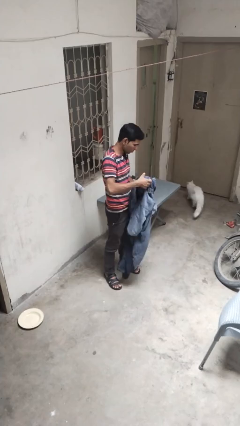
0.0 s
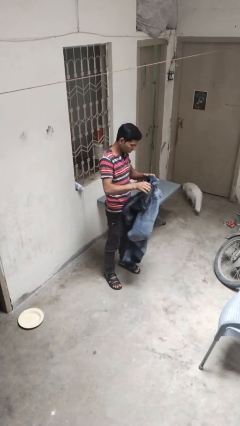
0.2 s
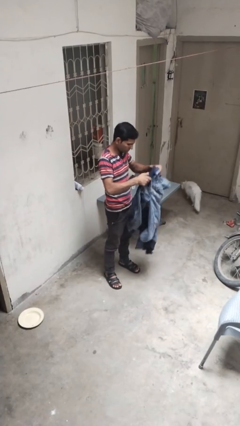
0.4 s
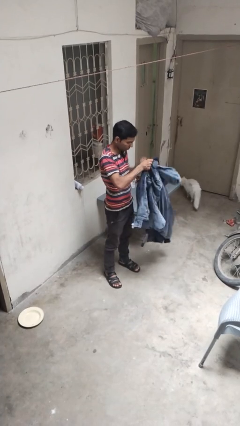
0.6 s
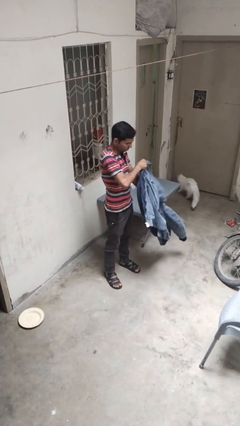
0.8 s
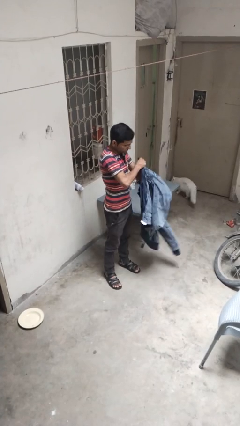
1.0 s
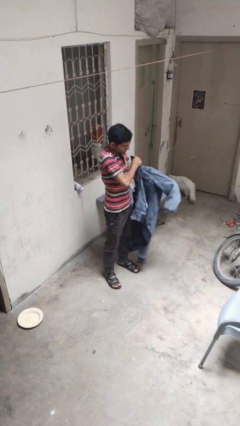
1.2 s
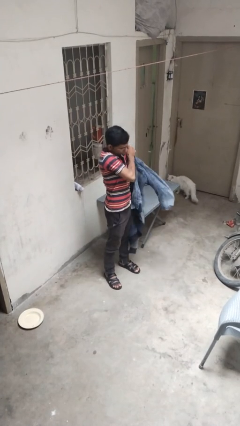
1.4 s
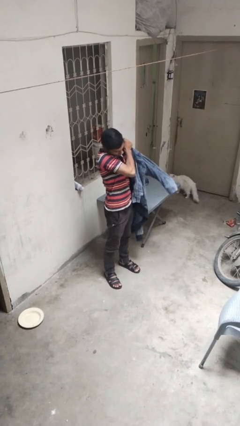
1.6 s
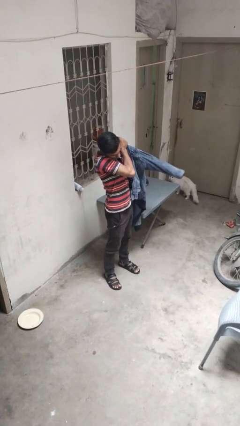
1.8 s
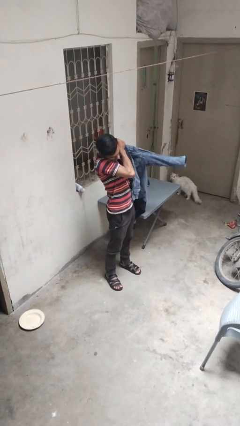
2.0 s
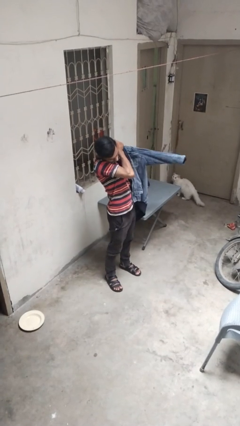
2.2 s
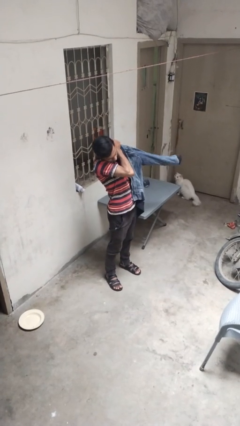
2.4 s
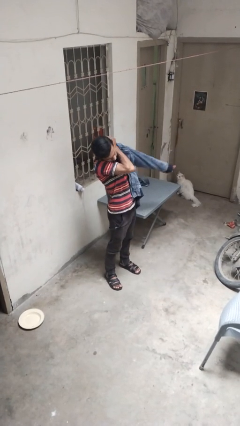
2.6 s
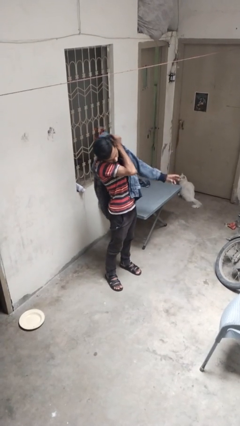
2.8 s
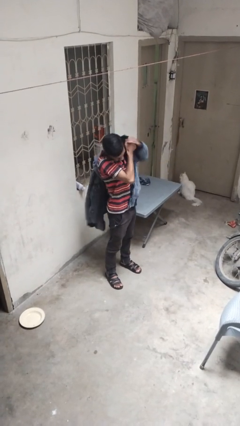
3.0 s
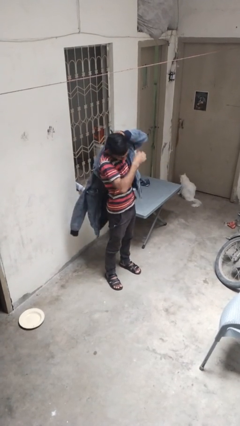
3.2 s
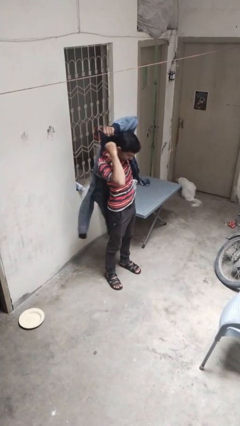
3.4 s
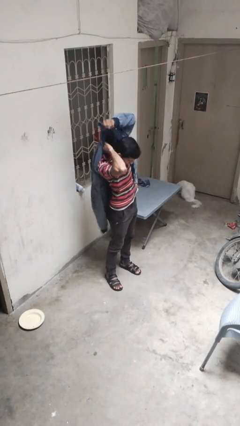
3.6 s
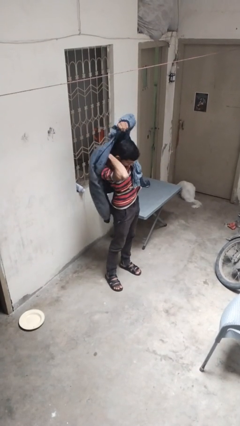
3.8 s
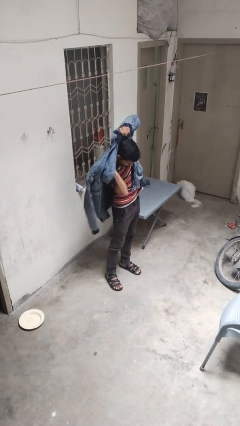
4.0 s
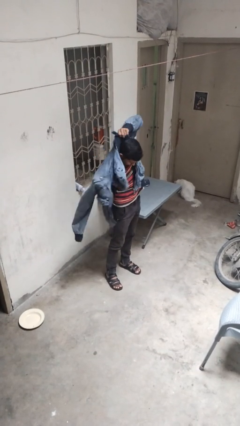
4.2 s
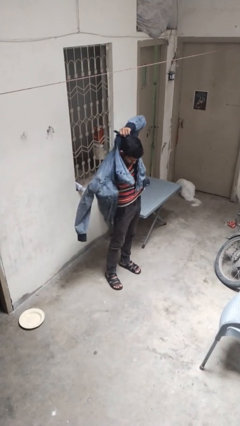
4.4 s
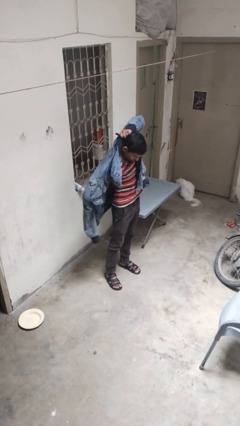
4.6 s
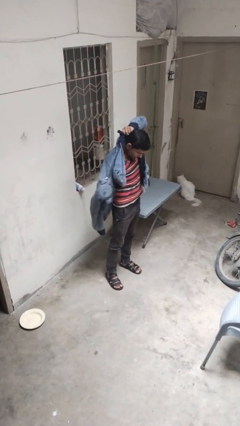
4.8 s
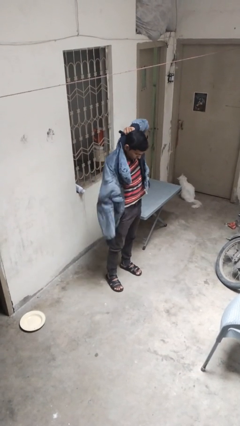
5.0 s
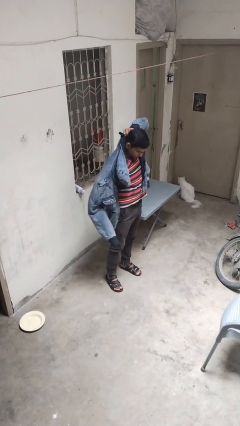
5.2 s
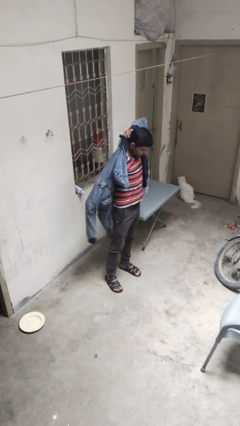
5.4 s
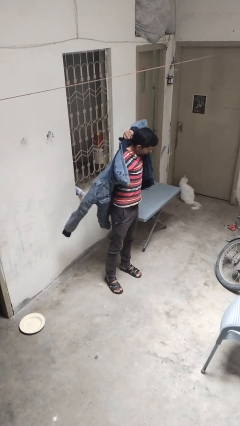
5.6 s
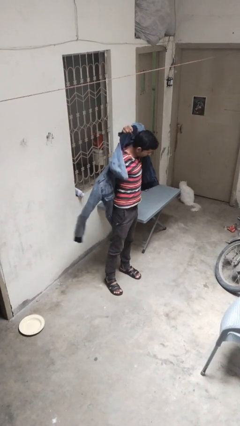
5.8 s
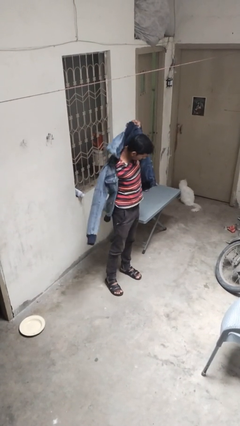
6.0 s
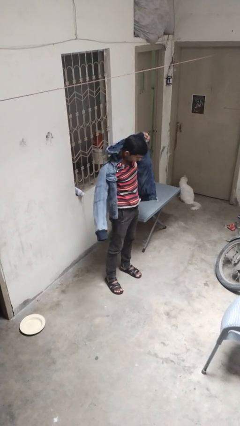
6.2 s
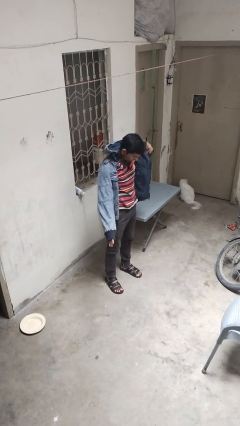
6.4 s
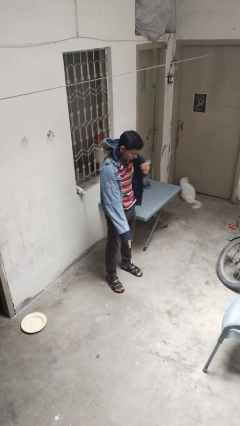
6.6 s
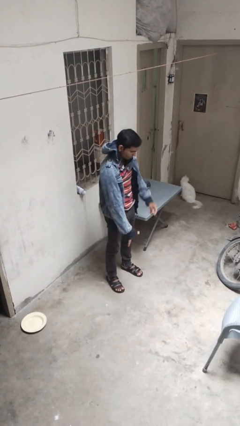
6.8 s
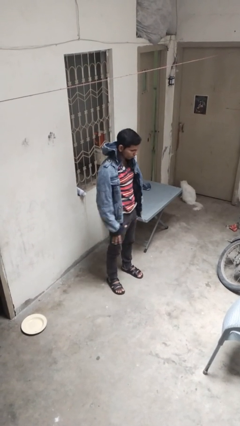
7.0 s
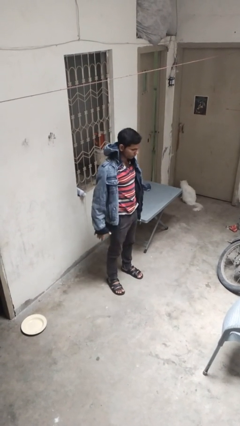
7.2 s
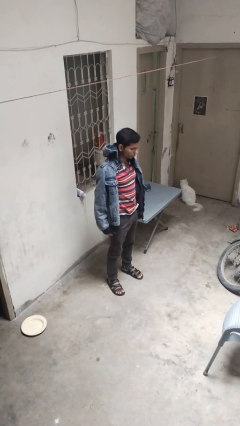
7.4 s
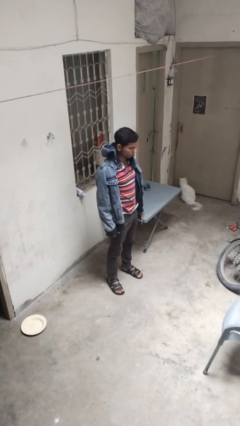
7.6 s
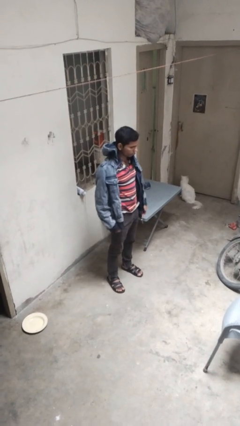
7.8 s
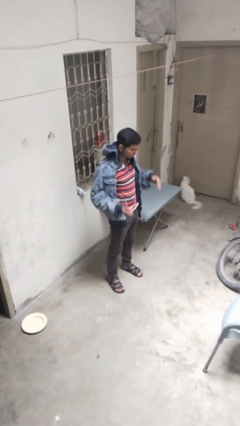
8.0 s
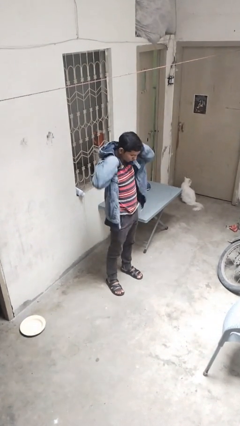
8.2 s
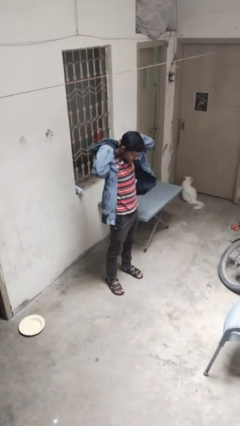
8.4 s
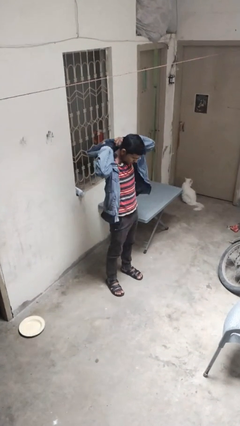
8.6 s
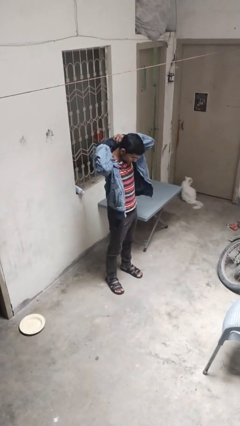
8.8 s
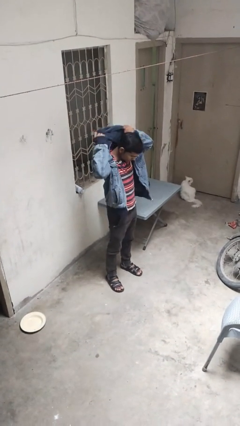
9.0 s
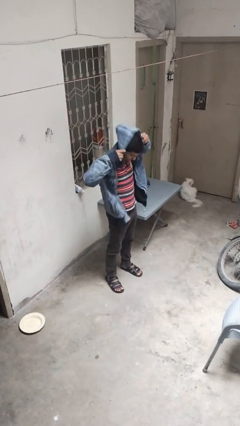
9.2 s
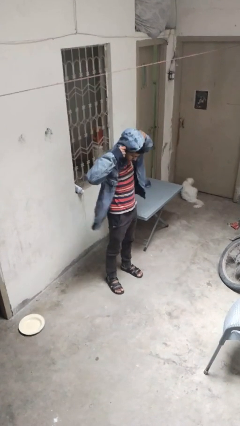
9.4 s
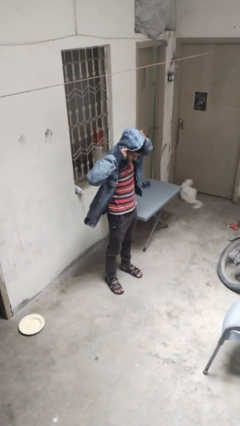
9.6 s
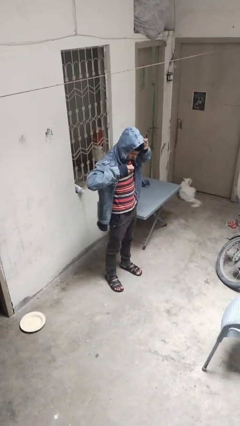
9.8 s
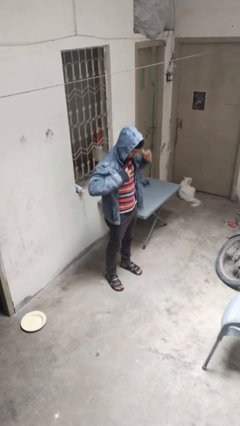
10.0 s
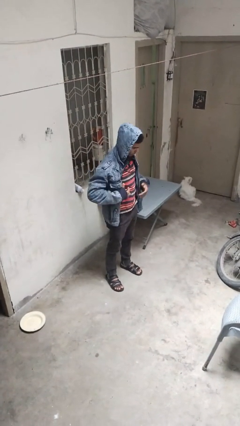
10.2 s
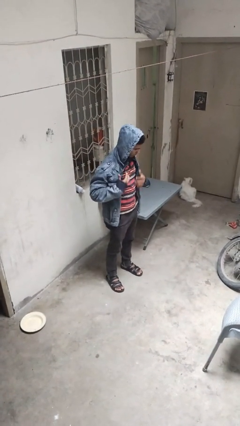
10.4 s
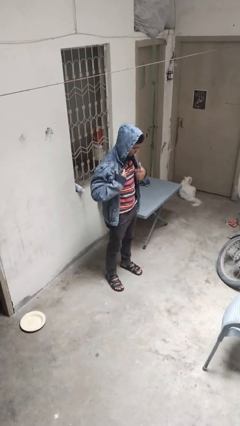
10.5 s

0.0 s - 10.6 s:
person puts on hoodie

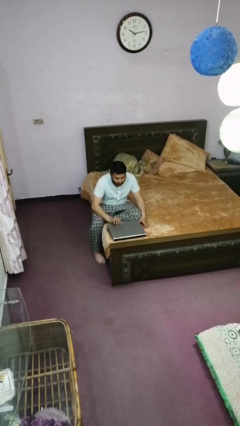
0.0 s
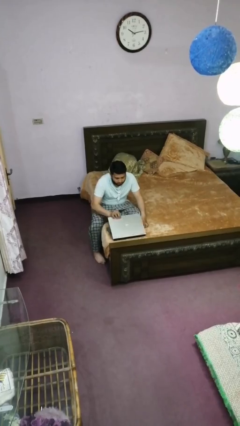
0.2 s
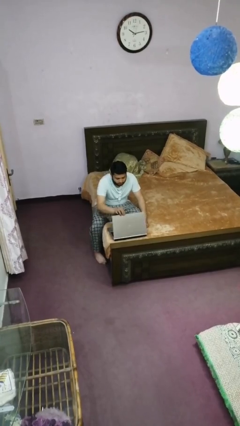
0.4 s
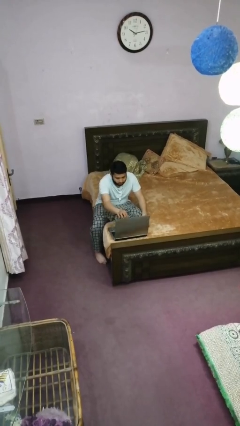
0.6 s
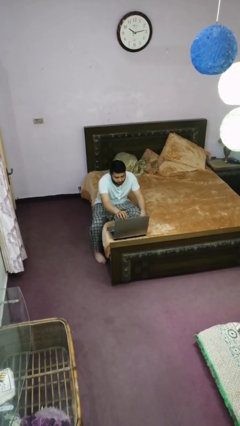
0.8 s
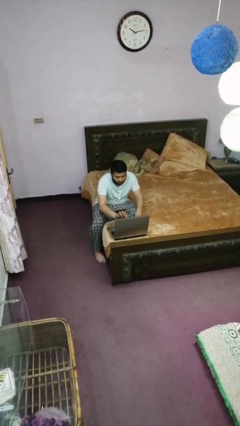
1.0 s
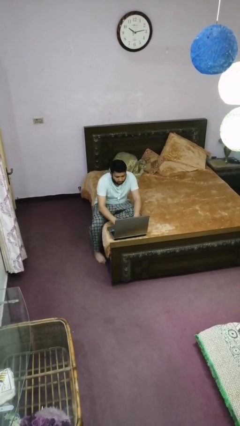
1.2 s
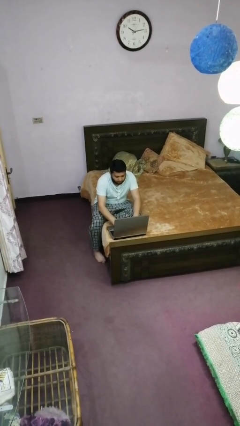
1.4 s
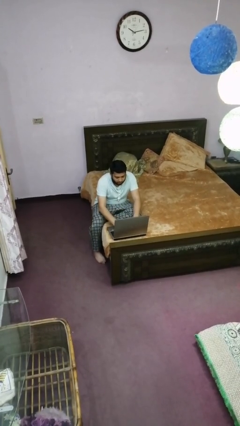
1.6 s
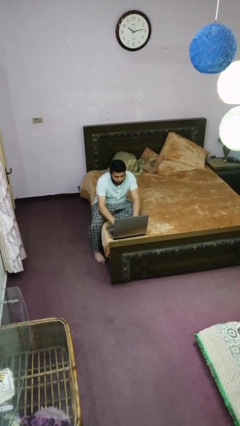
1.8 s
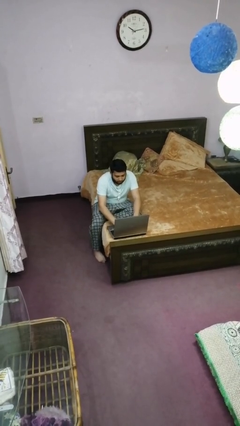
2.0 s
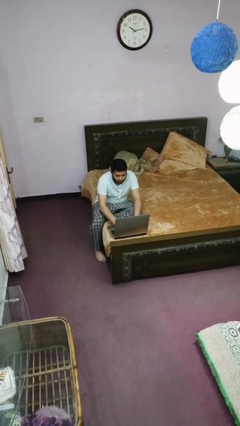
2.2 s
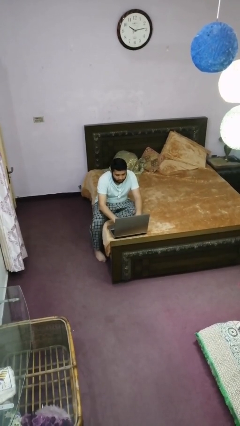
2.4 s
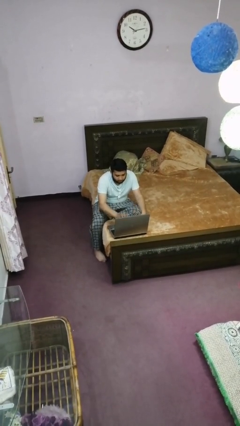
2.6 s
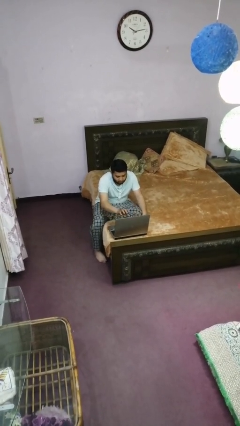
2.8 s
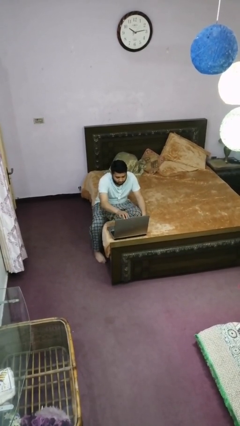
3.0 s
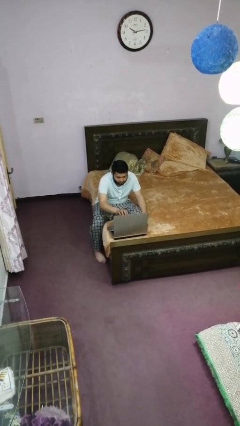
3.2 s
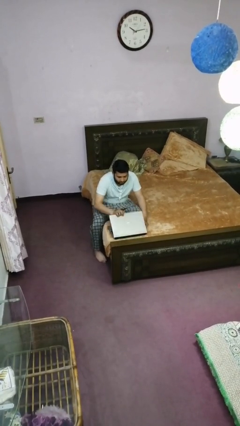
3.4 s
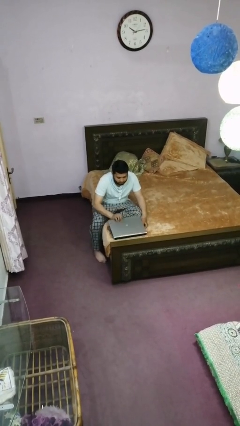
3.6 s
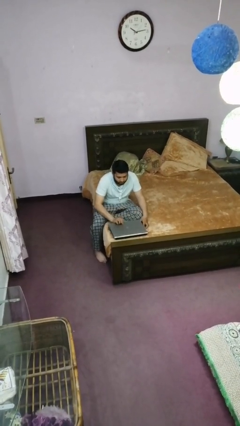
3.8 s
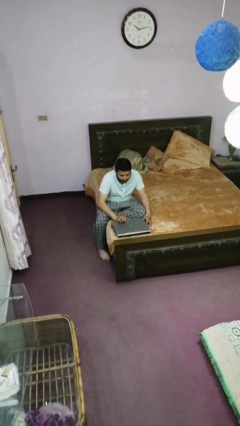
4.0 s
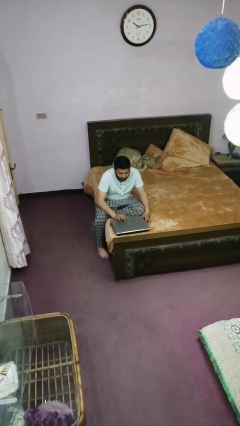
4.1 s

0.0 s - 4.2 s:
person interacts with laptop

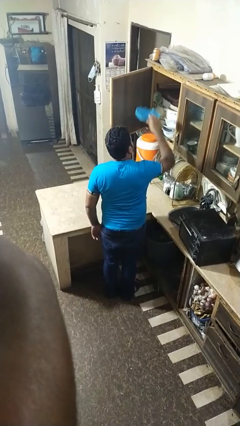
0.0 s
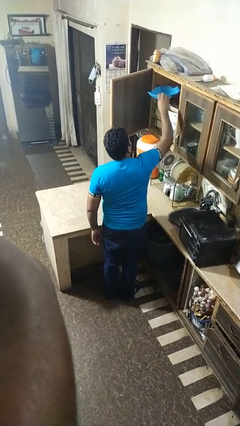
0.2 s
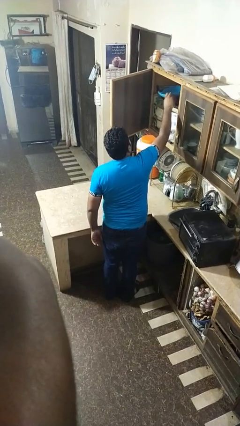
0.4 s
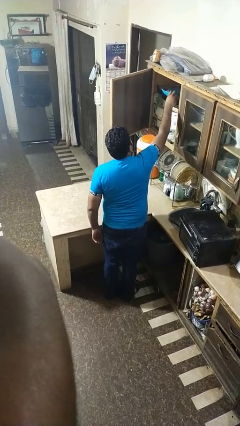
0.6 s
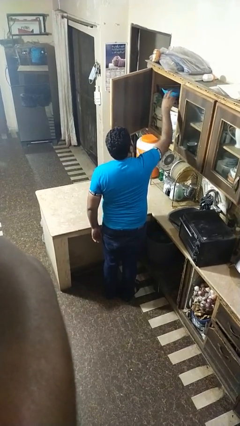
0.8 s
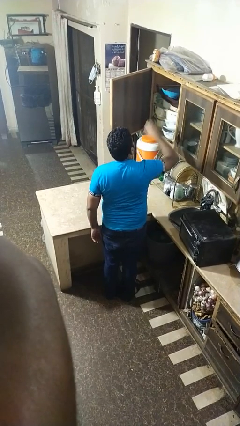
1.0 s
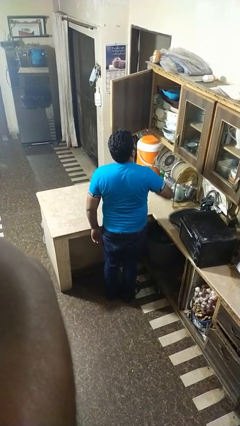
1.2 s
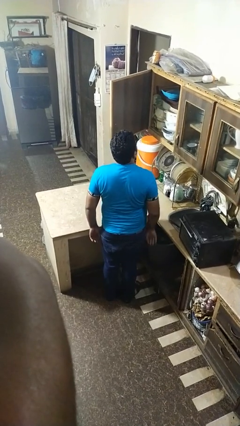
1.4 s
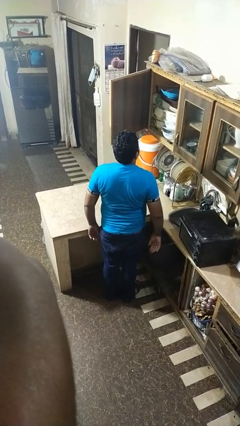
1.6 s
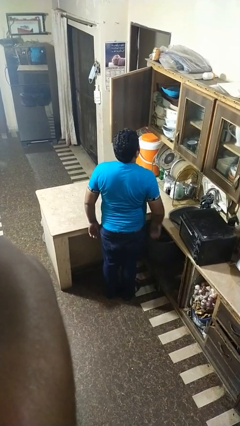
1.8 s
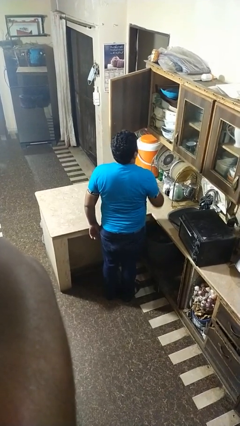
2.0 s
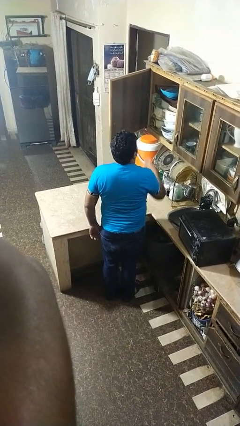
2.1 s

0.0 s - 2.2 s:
person takes object from cabinet

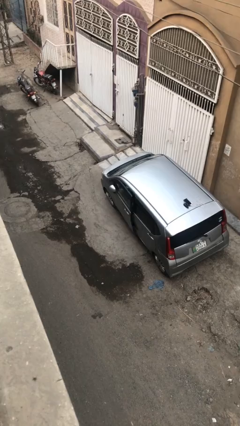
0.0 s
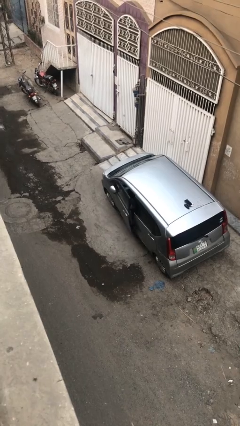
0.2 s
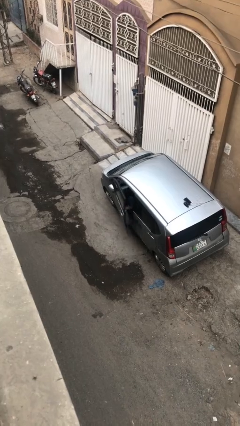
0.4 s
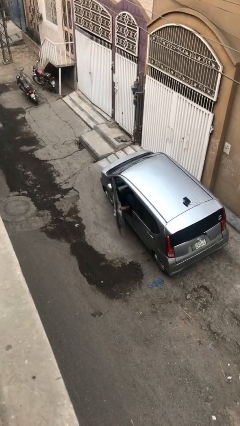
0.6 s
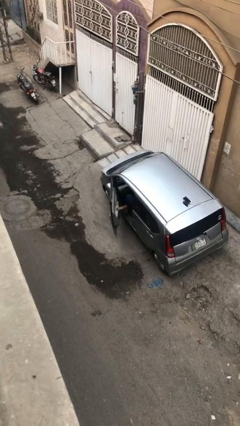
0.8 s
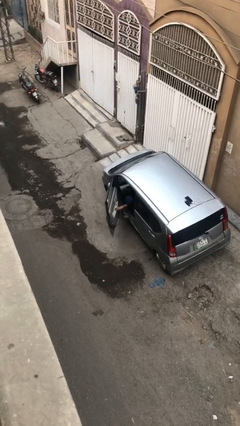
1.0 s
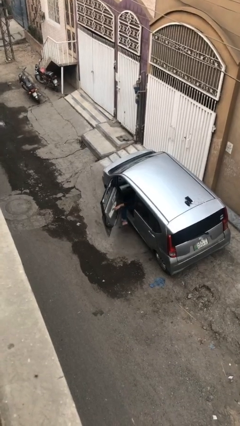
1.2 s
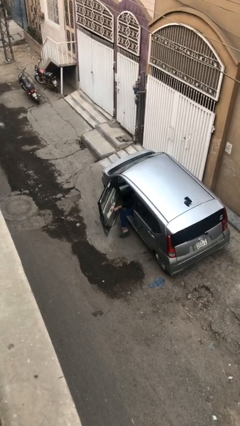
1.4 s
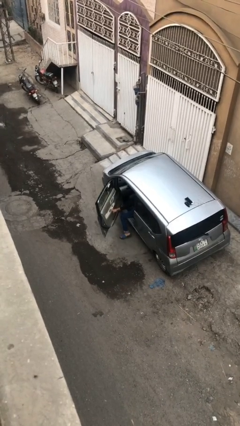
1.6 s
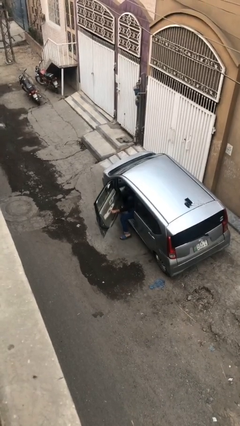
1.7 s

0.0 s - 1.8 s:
person opens car door
